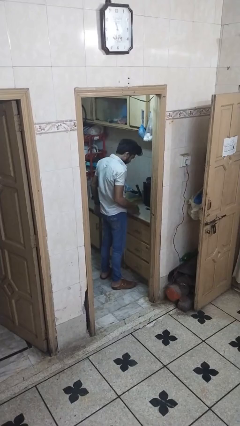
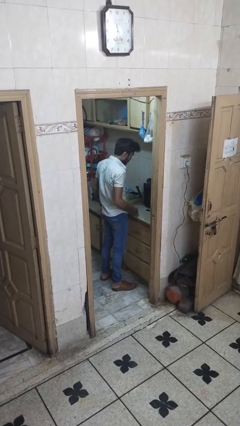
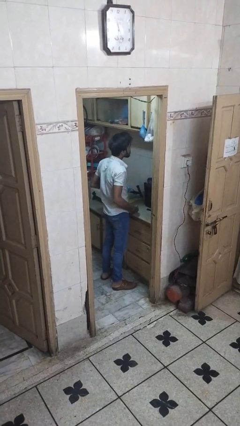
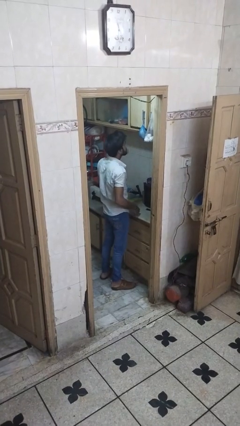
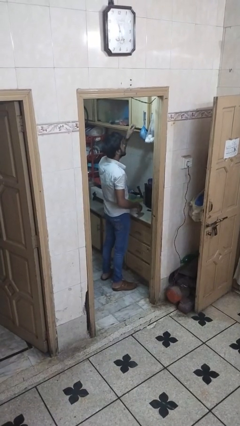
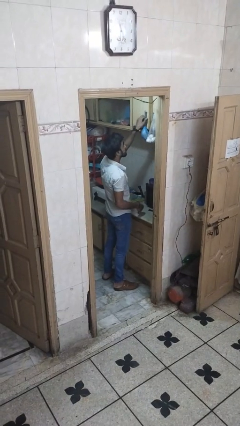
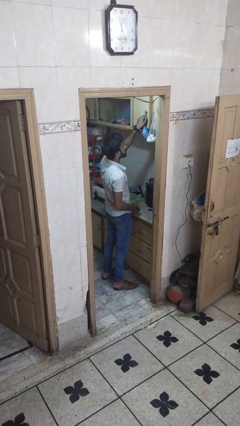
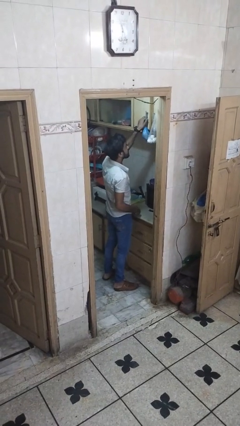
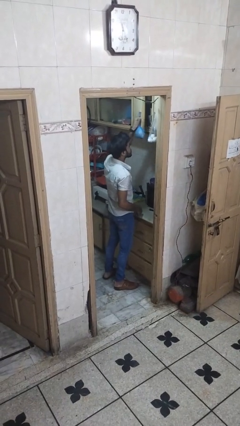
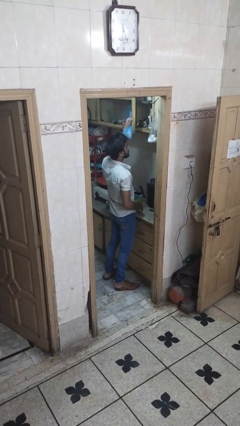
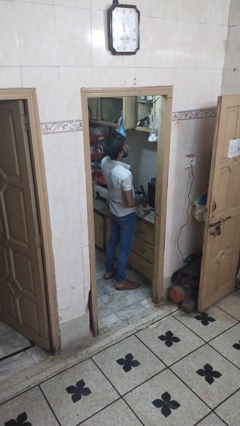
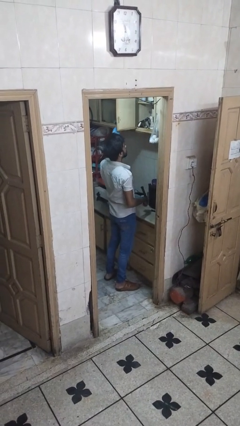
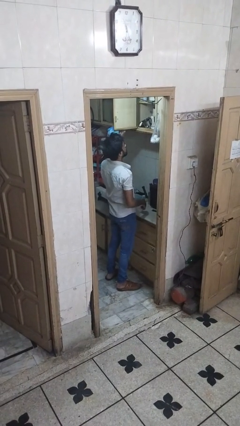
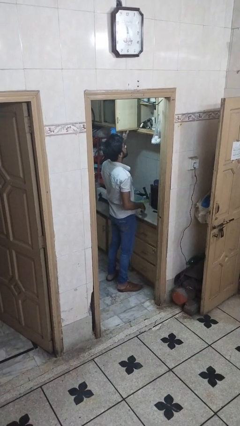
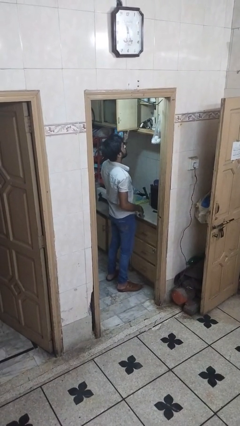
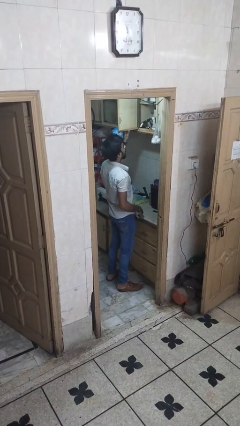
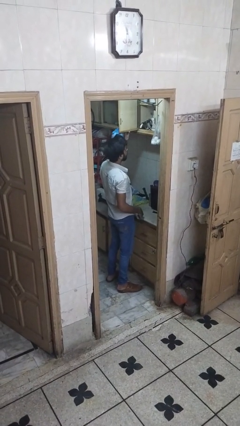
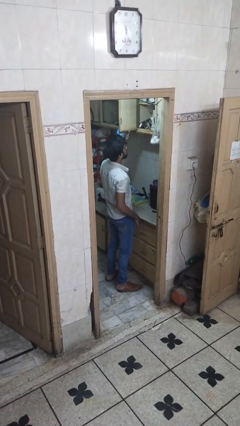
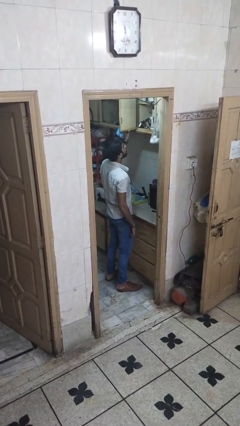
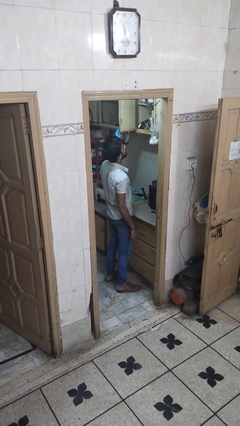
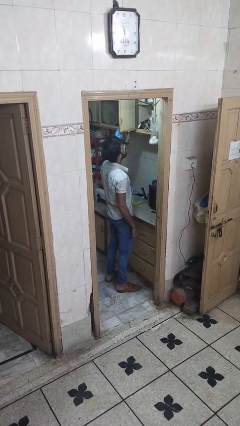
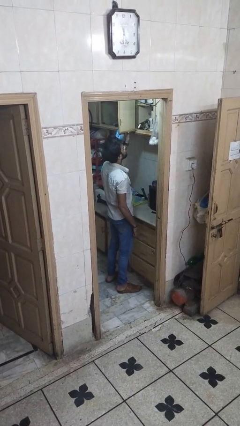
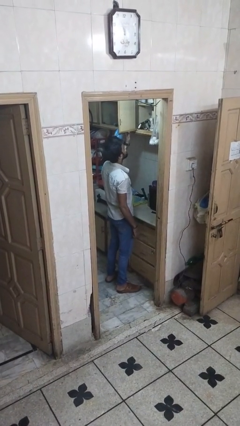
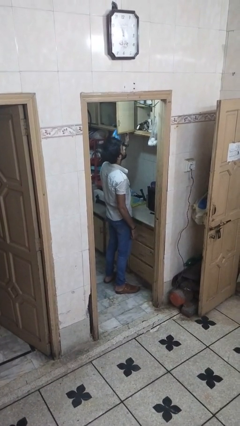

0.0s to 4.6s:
person opens cabinet

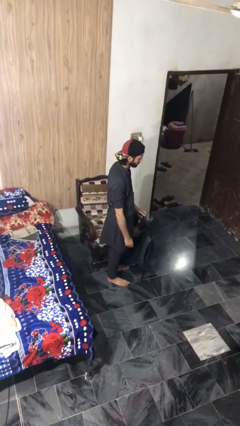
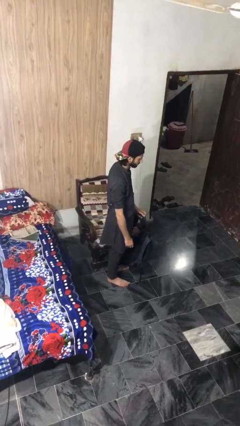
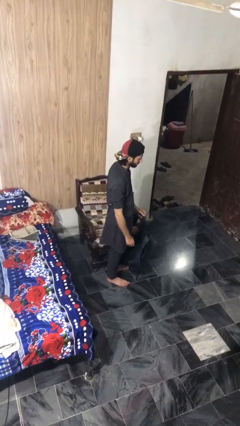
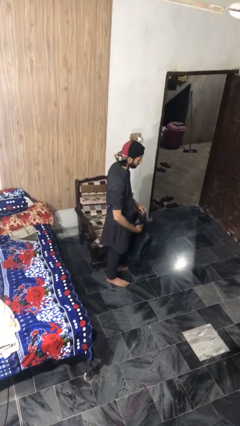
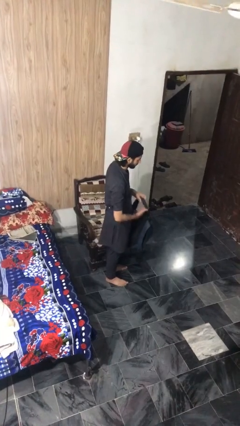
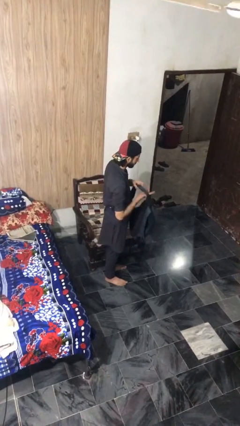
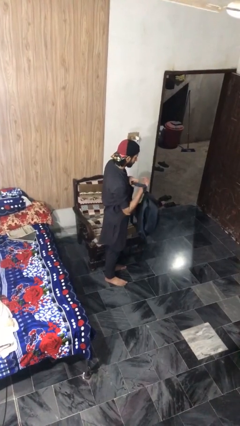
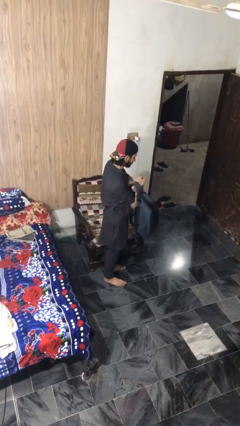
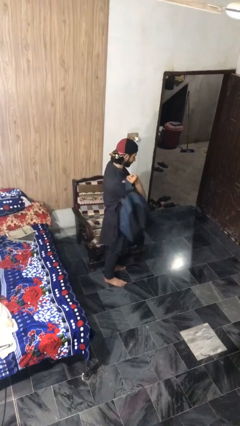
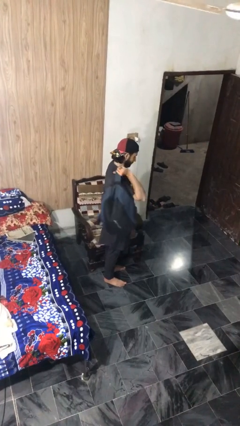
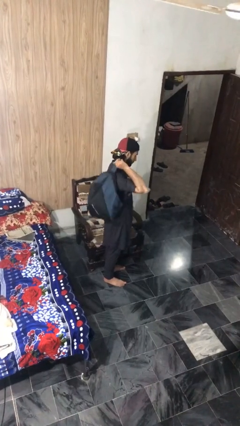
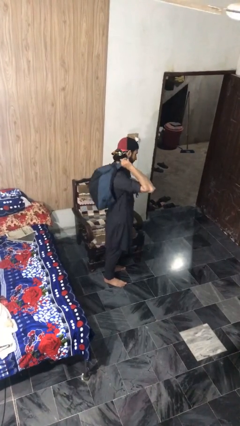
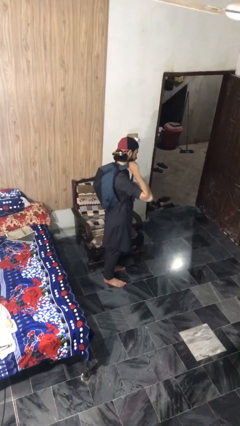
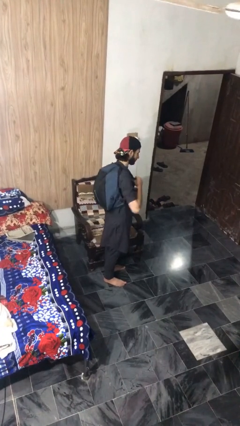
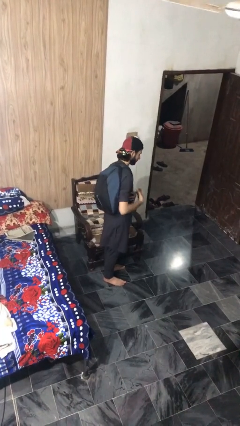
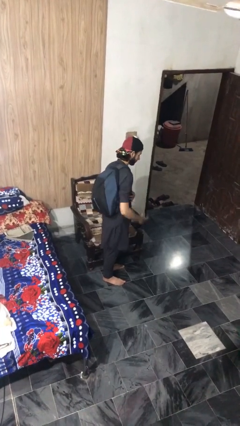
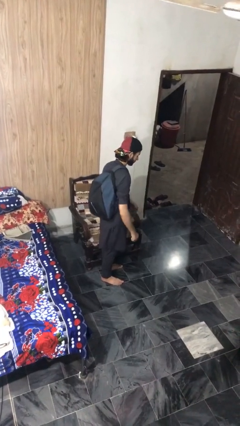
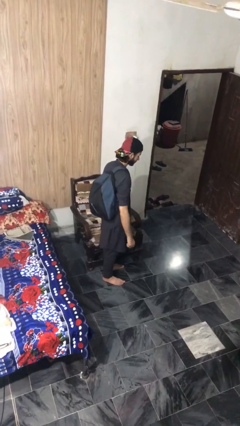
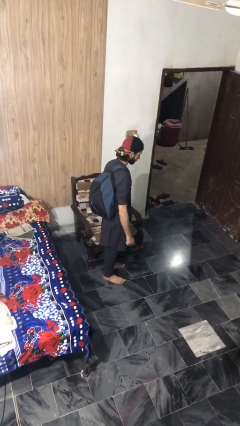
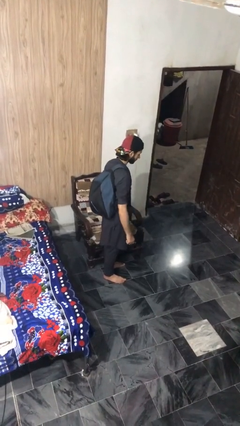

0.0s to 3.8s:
person puts on backpack

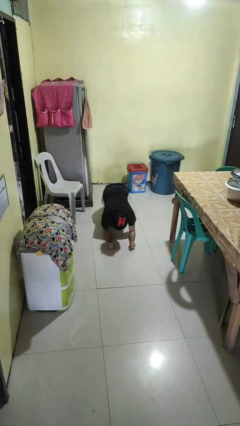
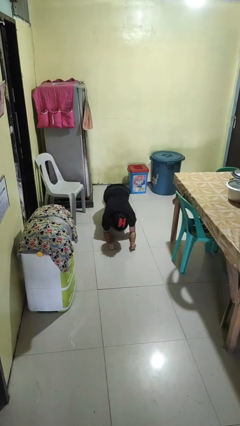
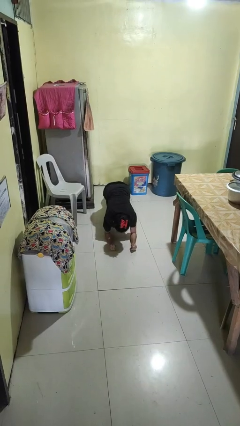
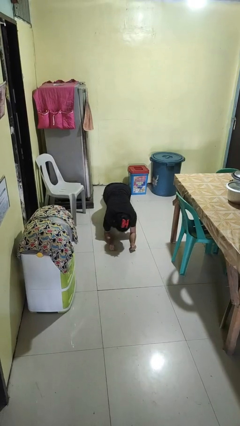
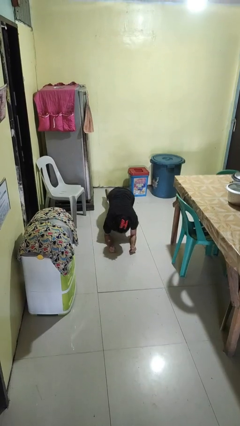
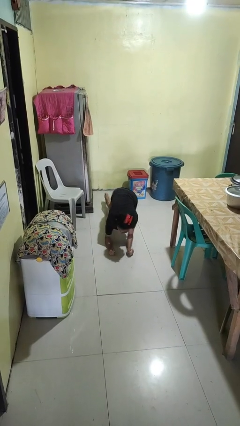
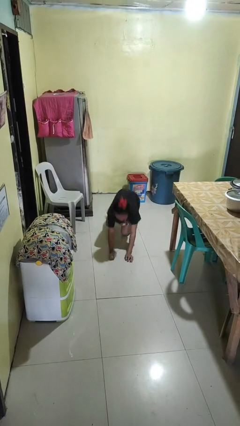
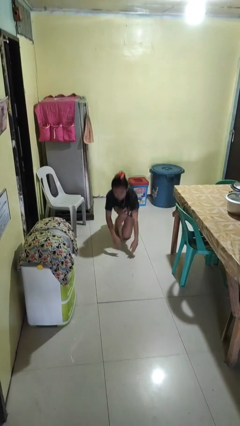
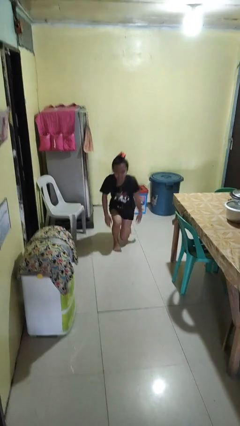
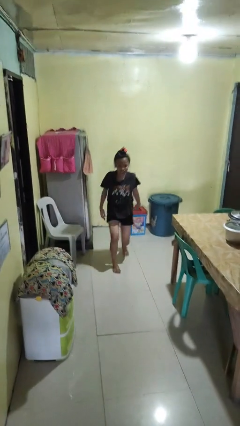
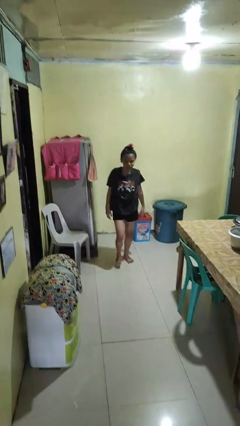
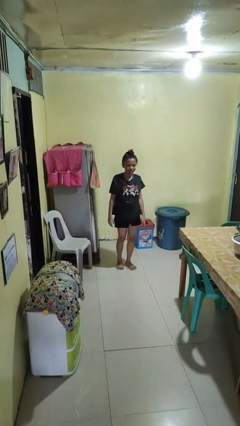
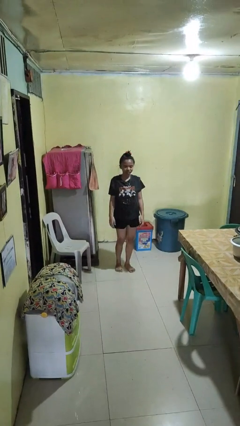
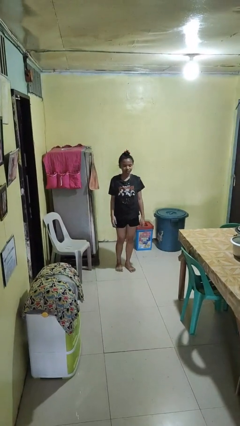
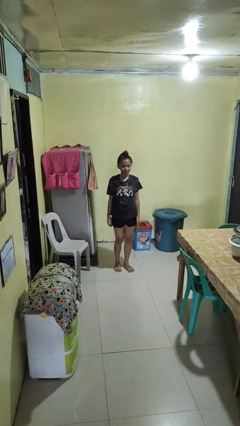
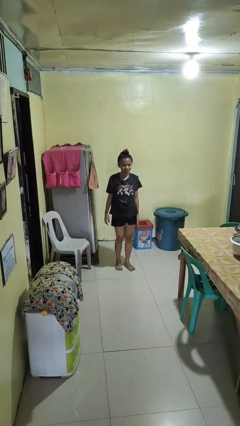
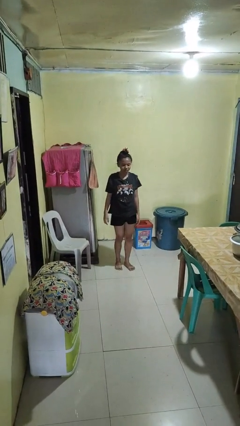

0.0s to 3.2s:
person stands up from floor

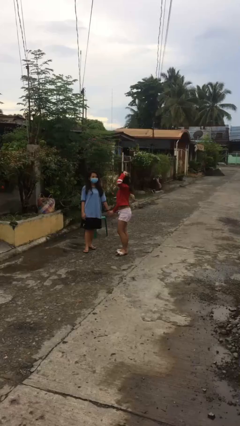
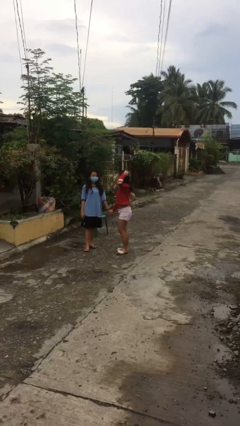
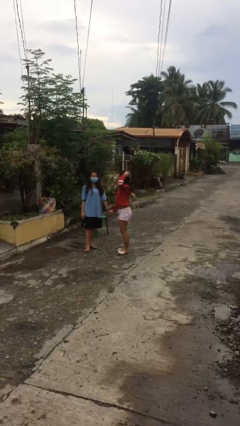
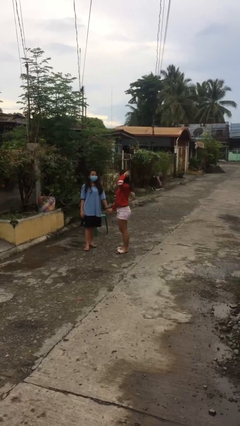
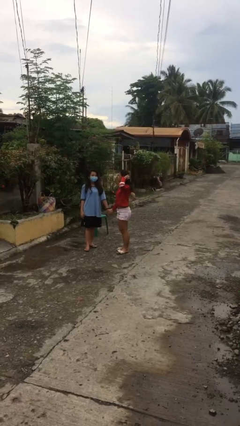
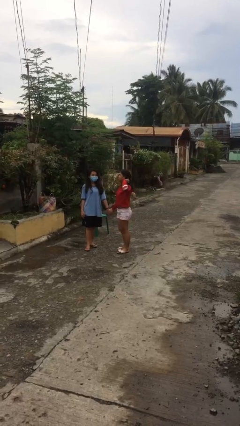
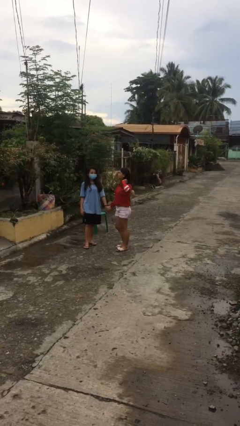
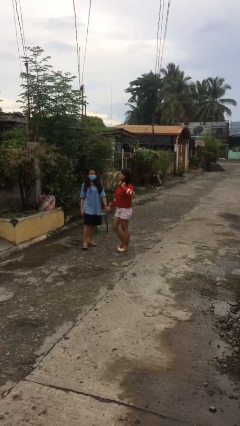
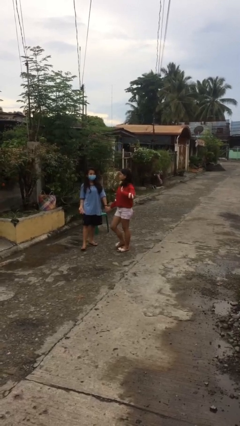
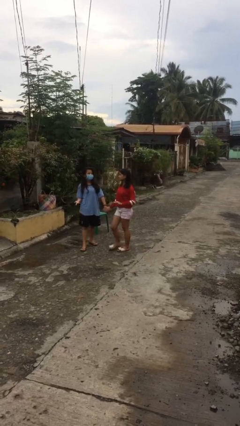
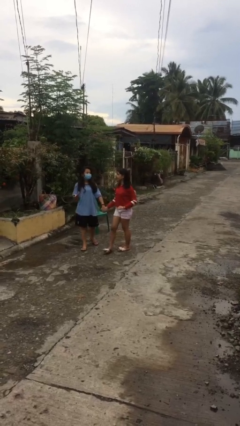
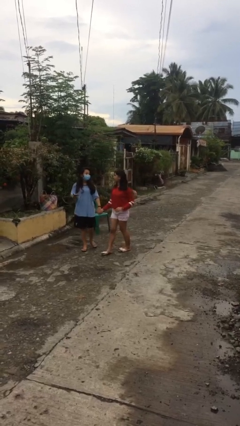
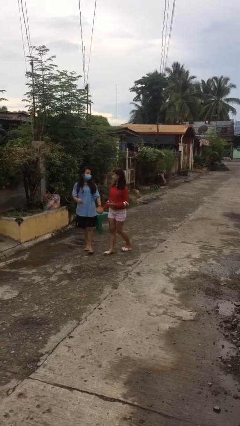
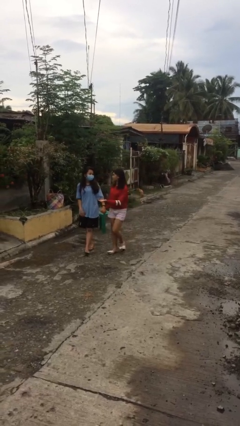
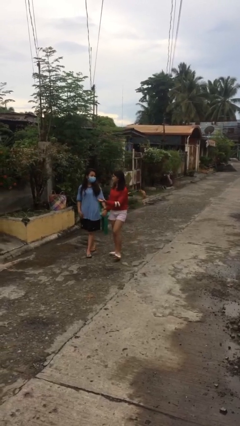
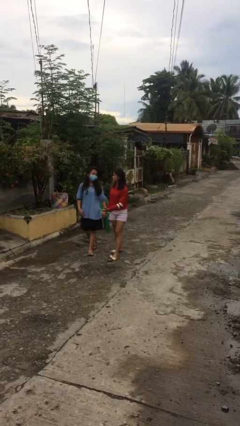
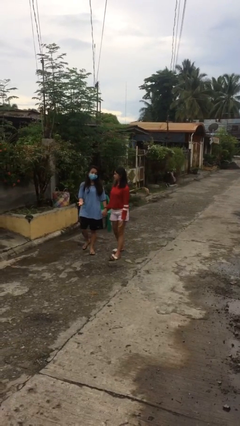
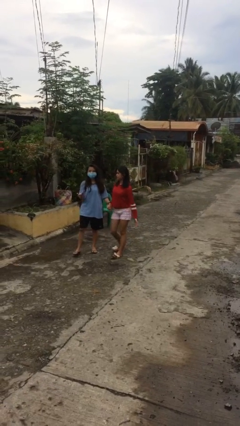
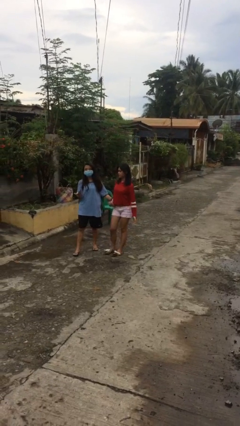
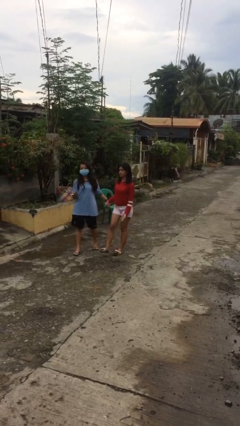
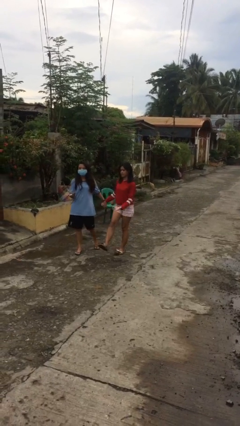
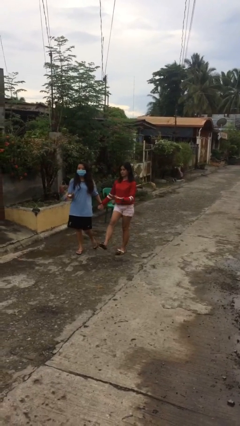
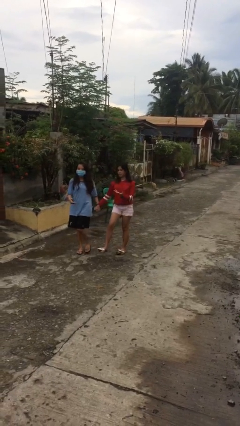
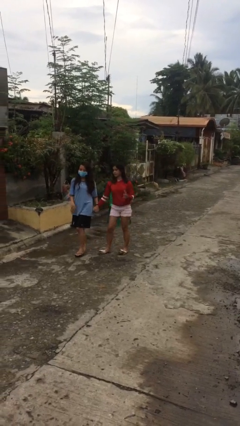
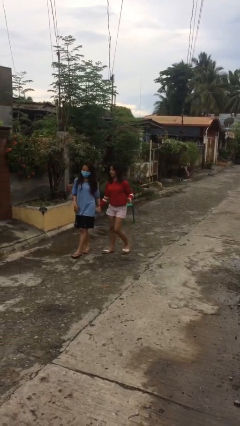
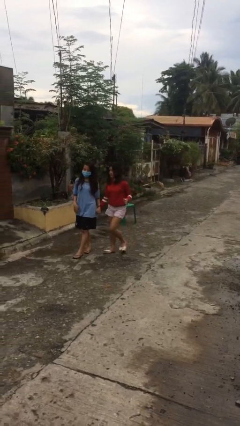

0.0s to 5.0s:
person holds hand

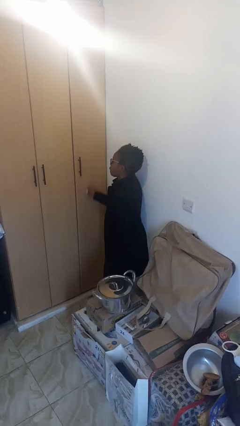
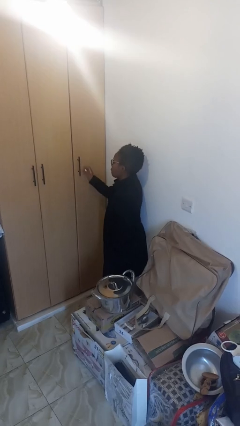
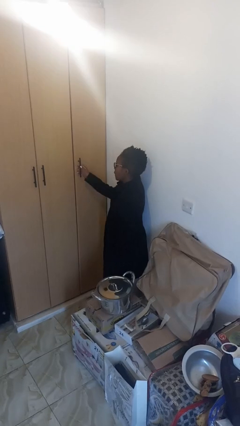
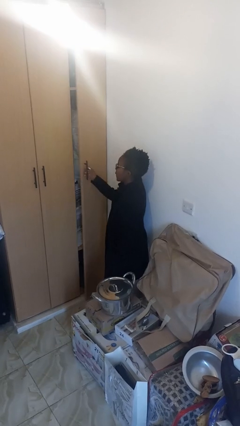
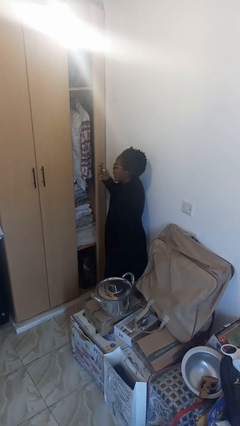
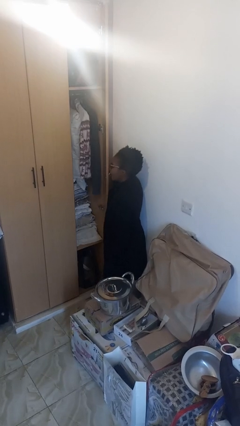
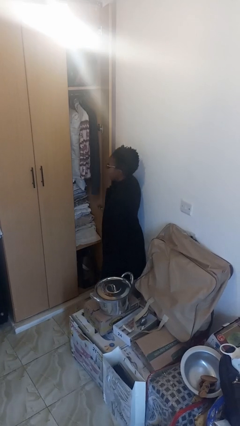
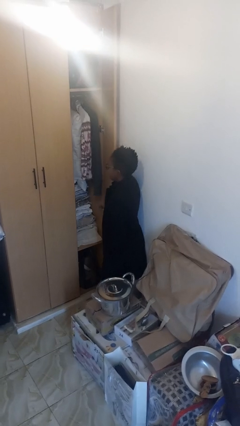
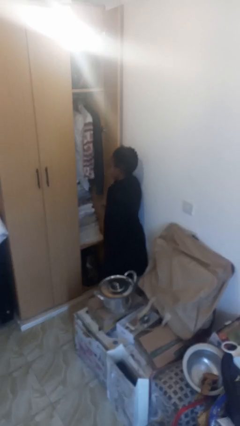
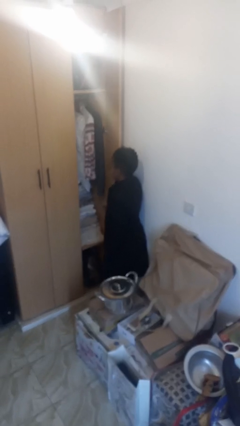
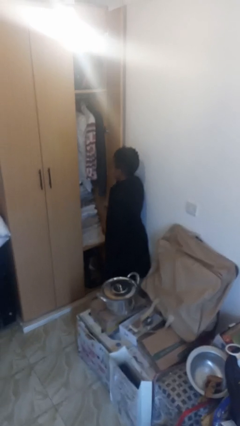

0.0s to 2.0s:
person opens closet door
